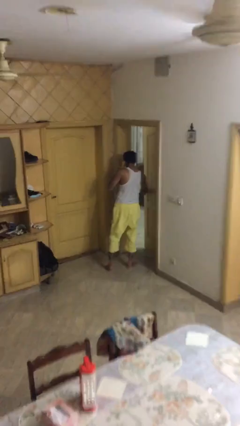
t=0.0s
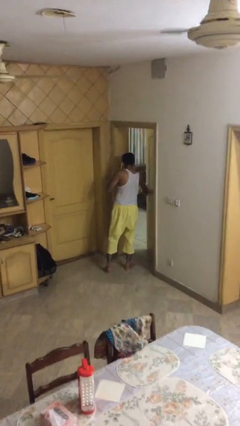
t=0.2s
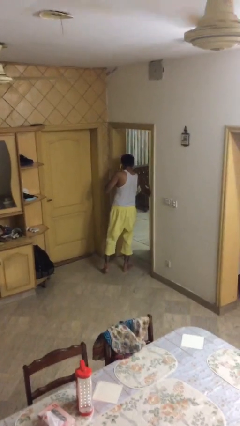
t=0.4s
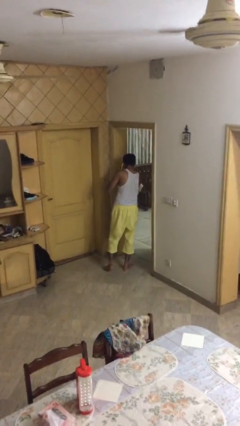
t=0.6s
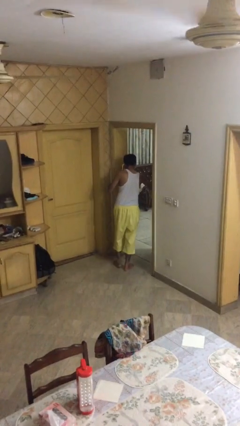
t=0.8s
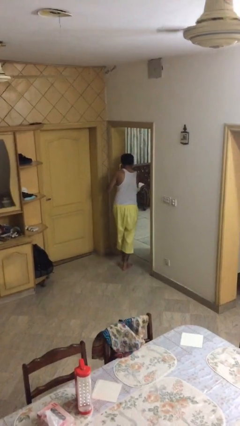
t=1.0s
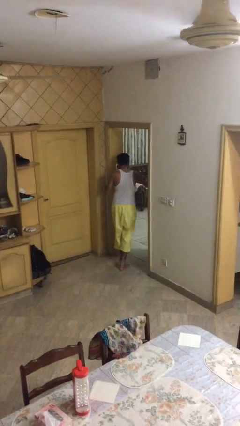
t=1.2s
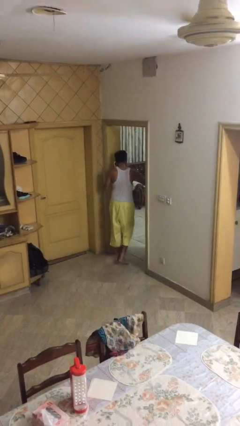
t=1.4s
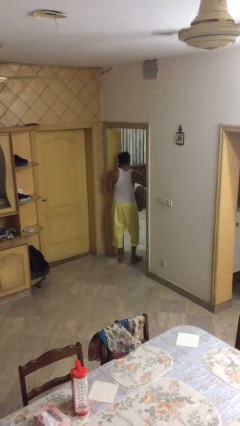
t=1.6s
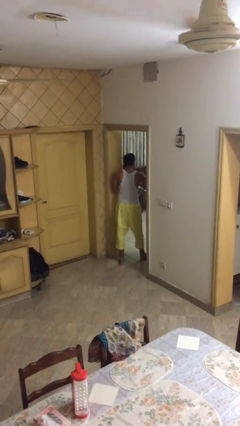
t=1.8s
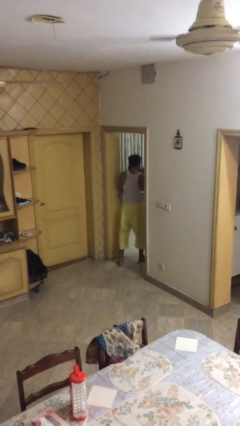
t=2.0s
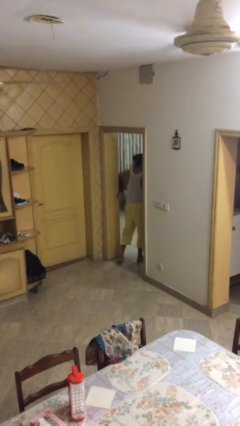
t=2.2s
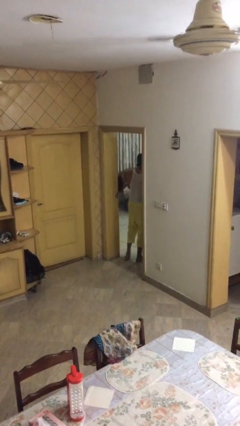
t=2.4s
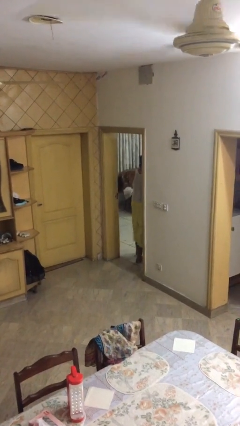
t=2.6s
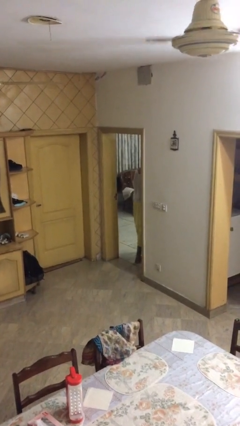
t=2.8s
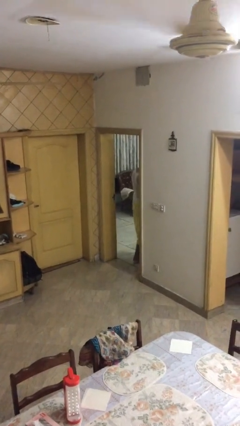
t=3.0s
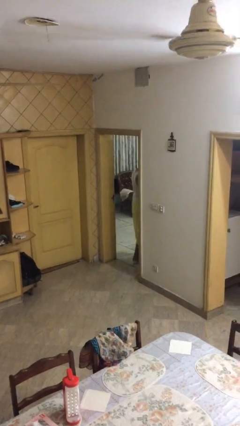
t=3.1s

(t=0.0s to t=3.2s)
person exits scene through structure

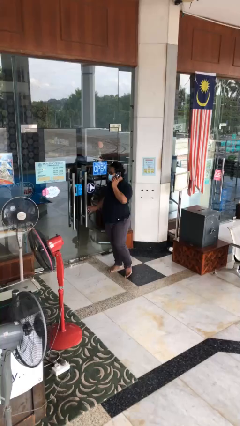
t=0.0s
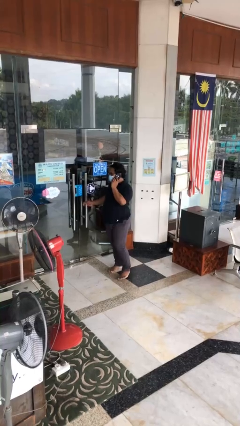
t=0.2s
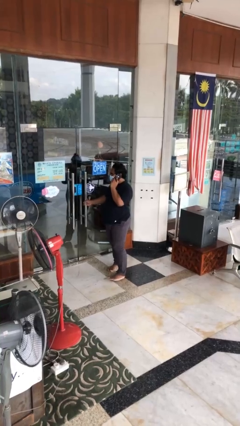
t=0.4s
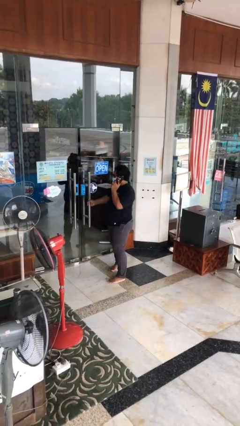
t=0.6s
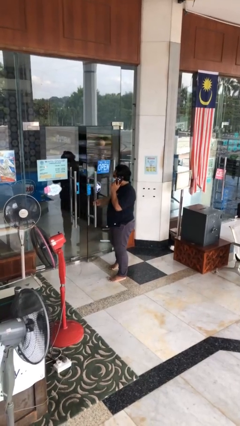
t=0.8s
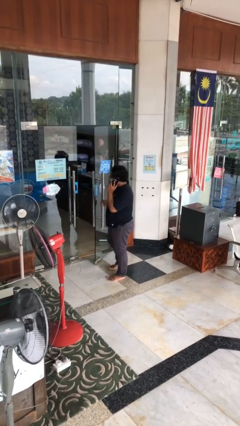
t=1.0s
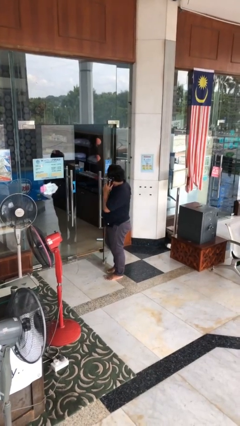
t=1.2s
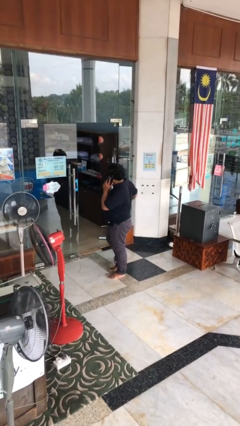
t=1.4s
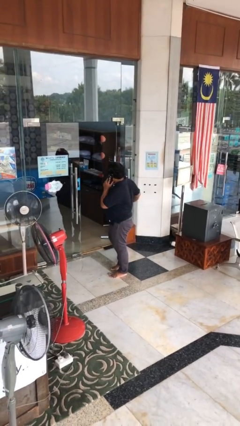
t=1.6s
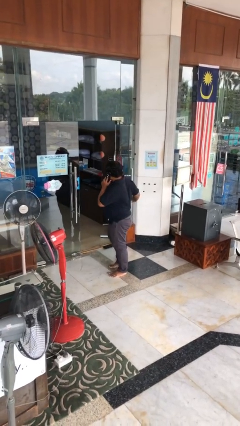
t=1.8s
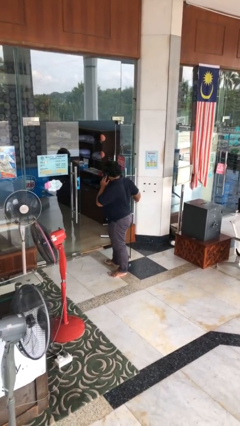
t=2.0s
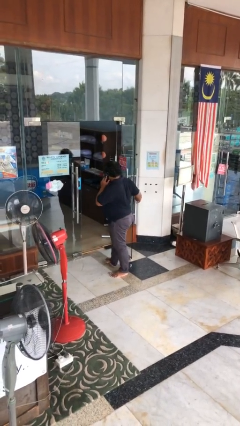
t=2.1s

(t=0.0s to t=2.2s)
person opens facility door

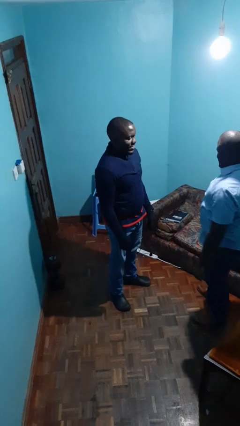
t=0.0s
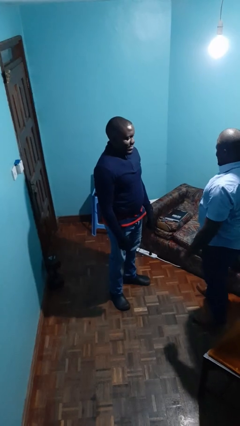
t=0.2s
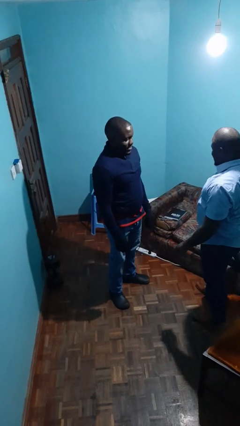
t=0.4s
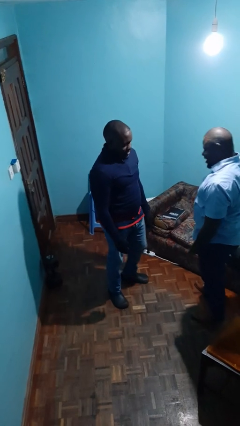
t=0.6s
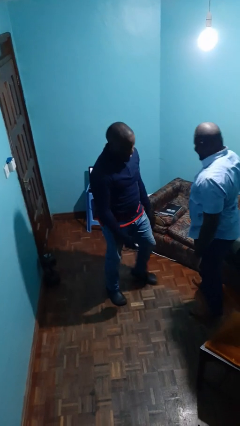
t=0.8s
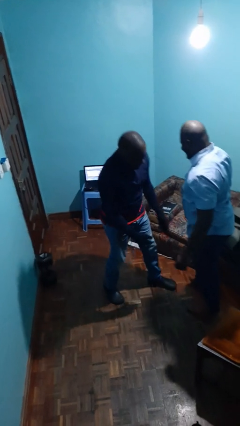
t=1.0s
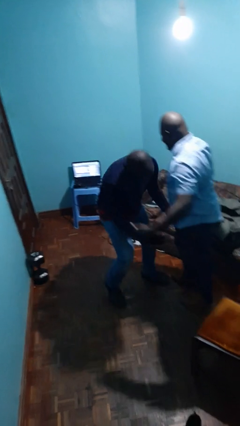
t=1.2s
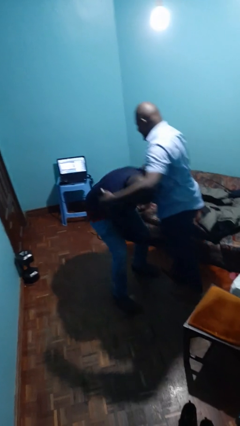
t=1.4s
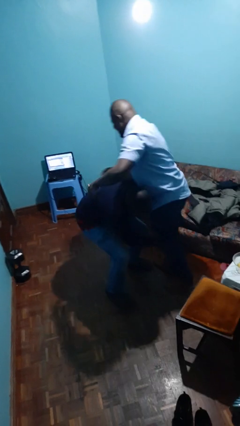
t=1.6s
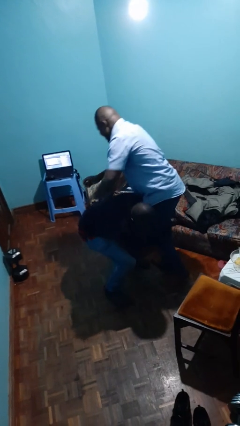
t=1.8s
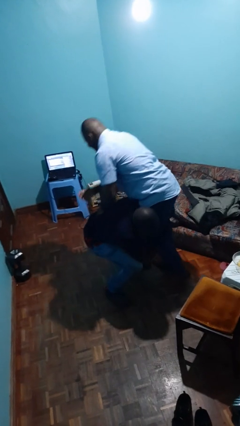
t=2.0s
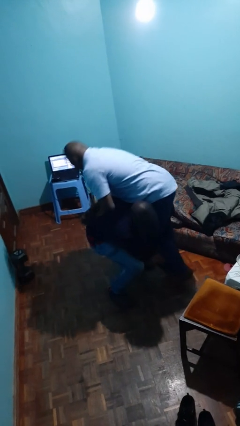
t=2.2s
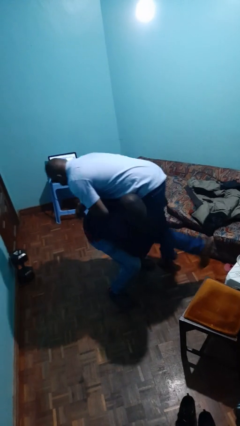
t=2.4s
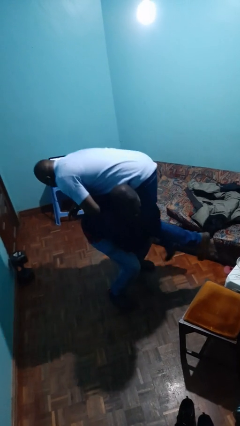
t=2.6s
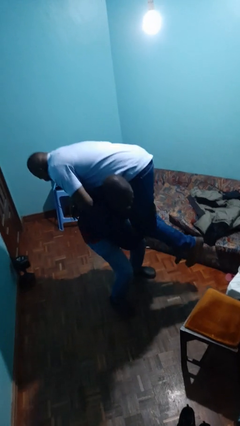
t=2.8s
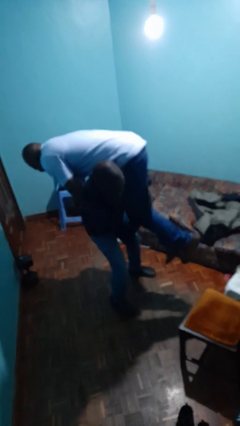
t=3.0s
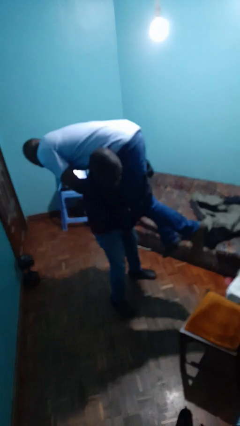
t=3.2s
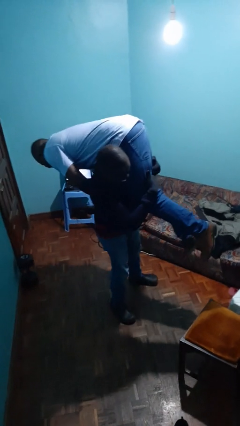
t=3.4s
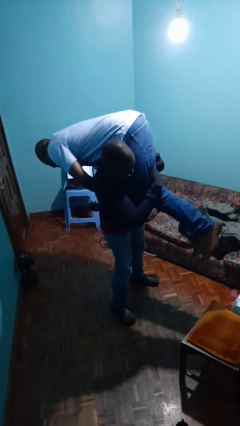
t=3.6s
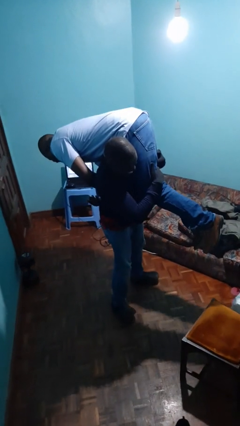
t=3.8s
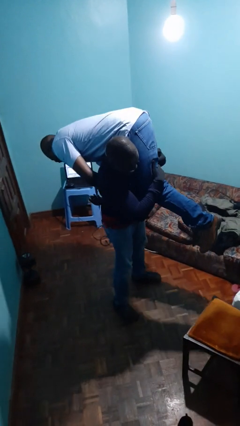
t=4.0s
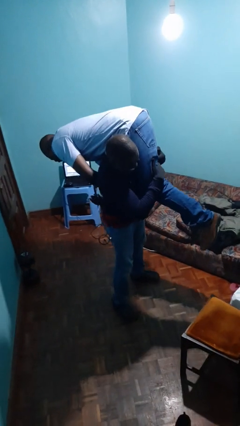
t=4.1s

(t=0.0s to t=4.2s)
person carries person over shoulder

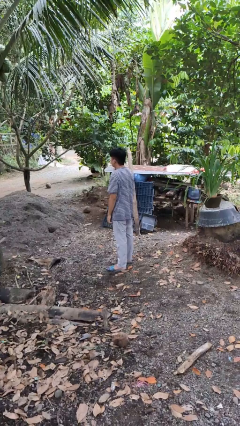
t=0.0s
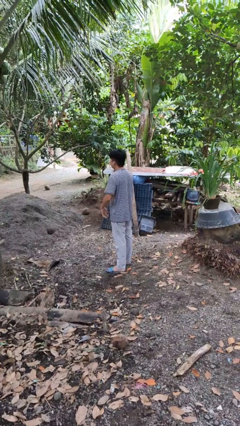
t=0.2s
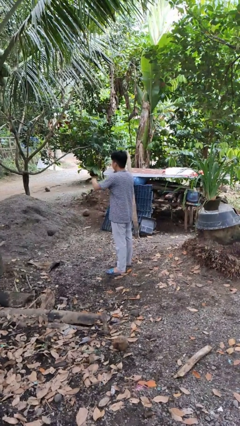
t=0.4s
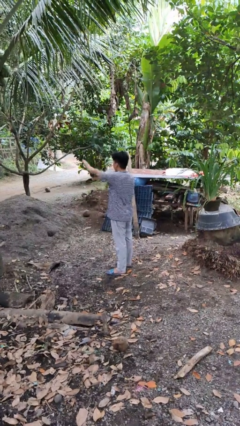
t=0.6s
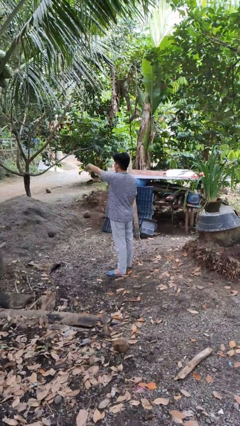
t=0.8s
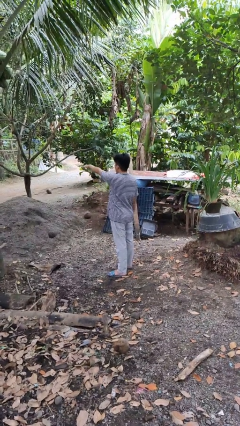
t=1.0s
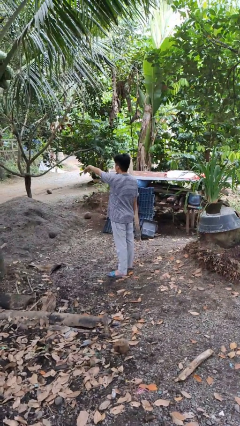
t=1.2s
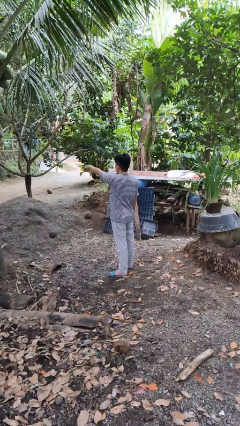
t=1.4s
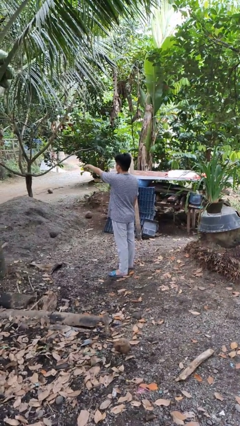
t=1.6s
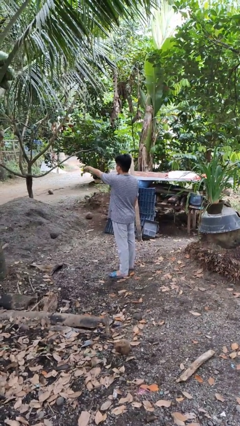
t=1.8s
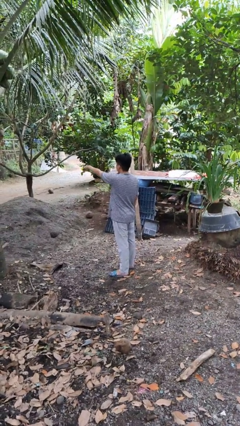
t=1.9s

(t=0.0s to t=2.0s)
person gestures come here

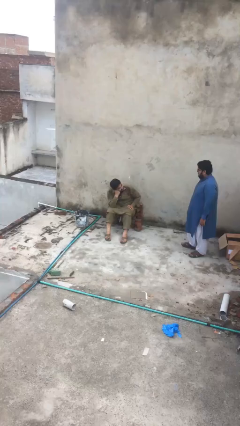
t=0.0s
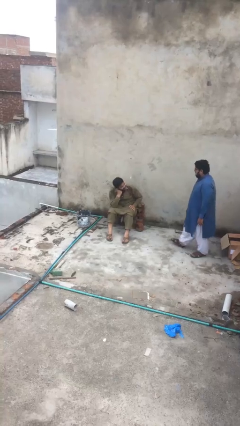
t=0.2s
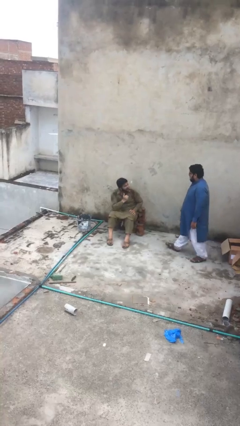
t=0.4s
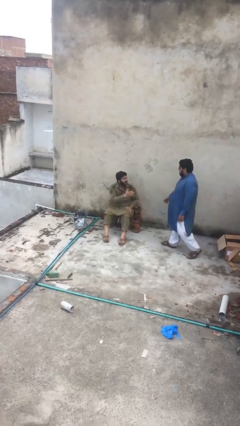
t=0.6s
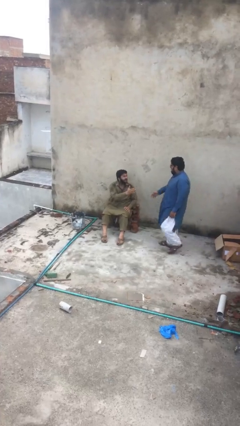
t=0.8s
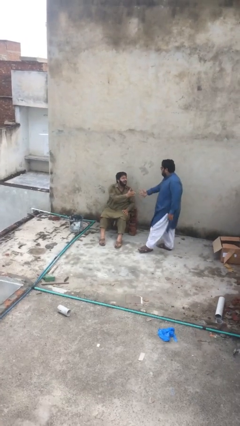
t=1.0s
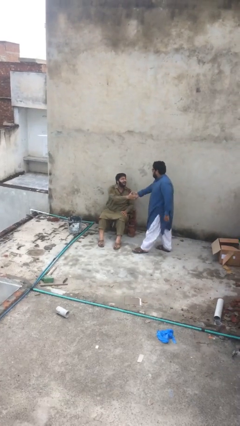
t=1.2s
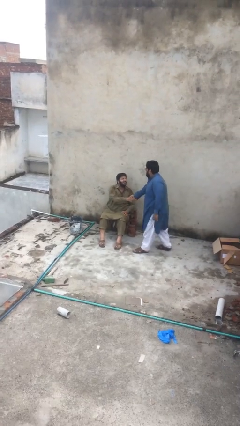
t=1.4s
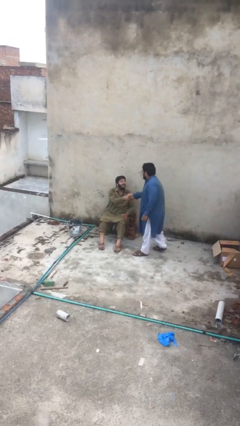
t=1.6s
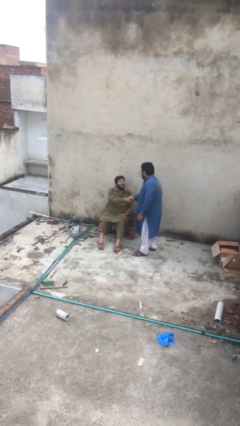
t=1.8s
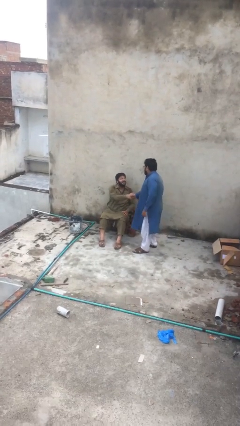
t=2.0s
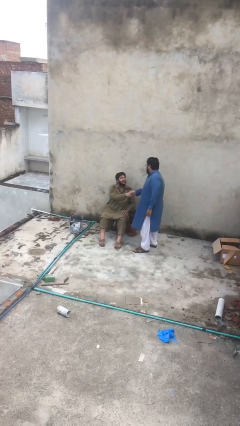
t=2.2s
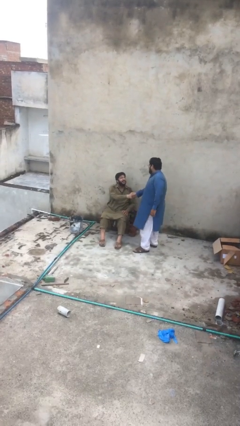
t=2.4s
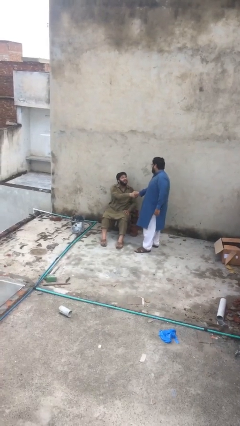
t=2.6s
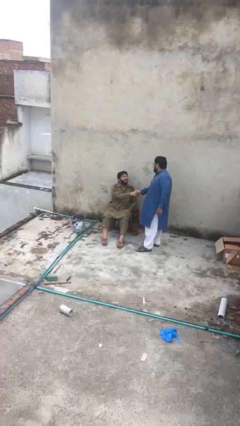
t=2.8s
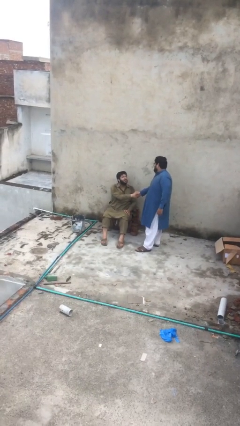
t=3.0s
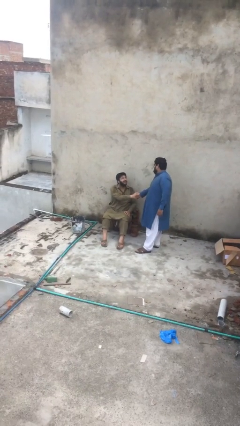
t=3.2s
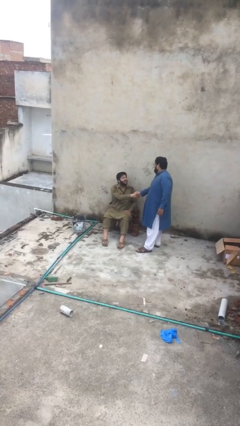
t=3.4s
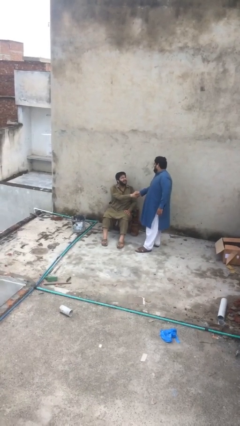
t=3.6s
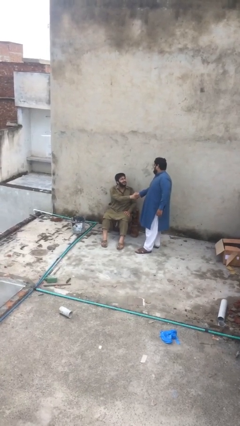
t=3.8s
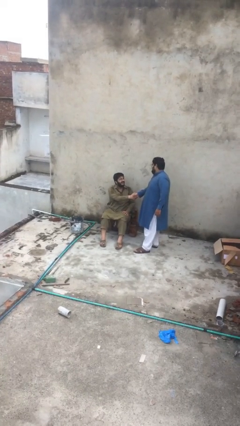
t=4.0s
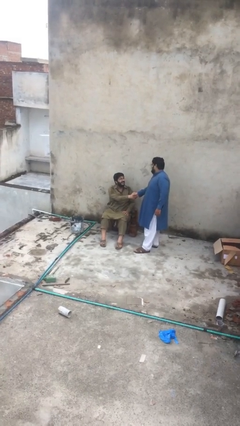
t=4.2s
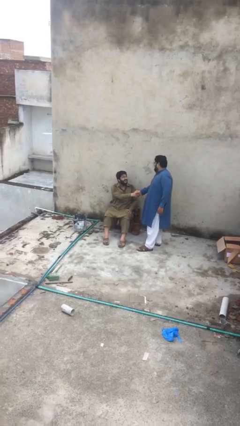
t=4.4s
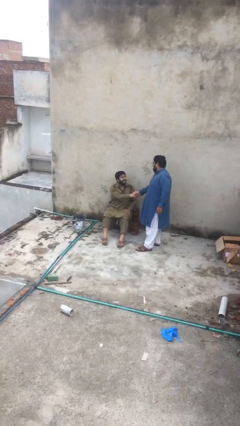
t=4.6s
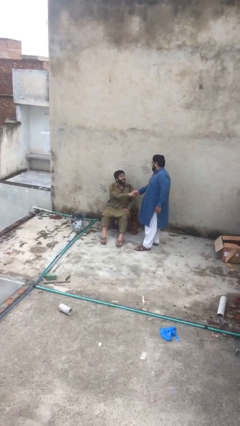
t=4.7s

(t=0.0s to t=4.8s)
person shakes hand

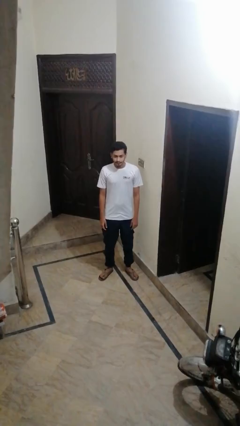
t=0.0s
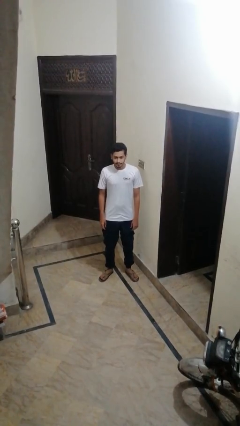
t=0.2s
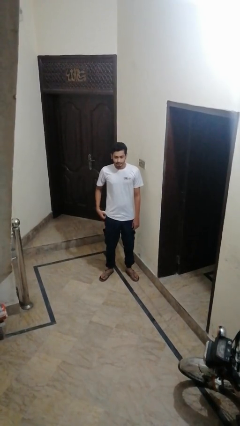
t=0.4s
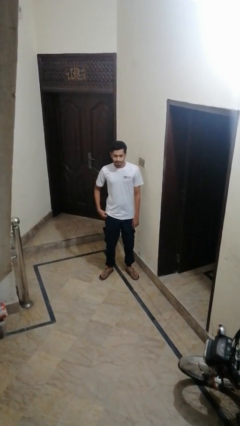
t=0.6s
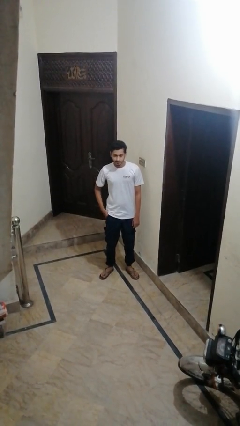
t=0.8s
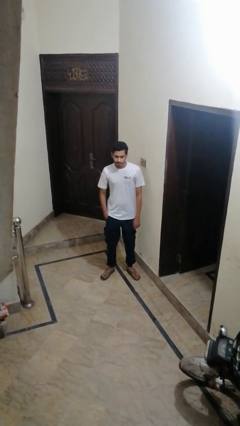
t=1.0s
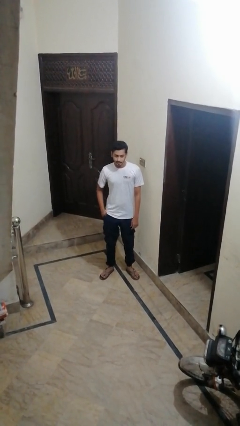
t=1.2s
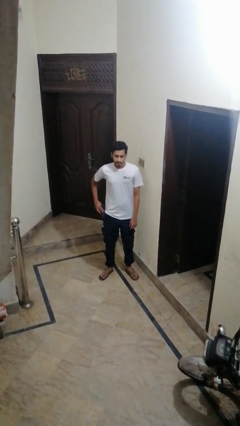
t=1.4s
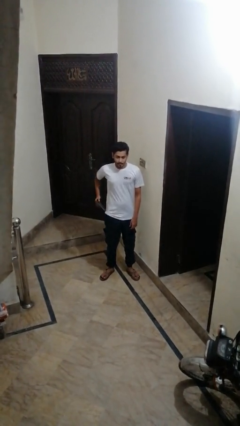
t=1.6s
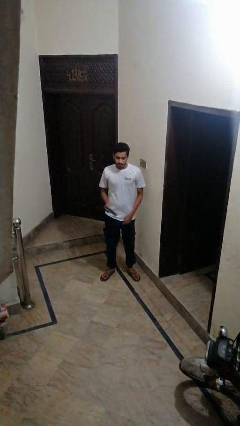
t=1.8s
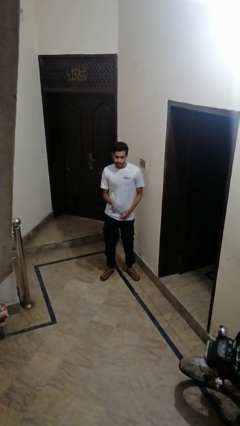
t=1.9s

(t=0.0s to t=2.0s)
person shoves person
